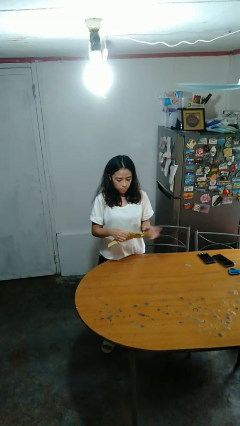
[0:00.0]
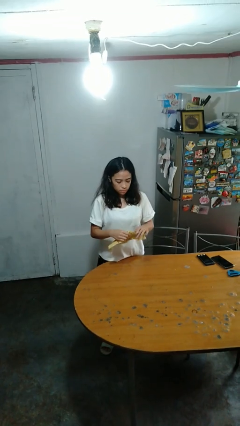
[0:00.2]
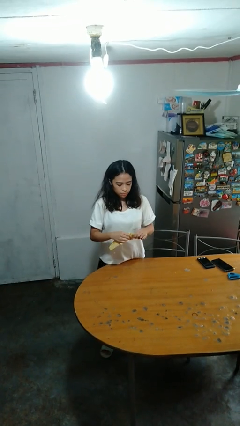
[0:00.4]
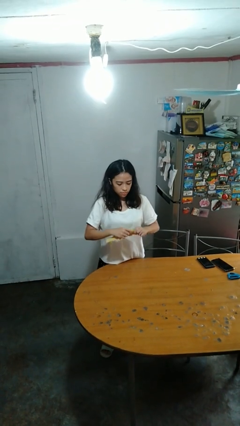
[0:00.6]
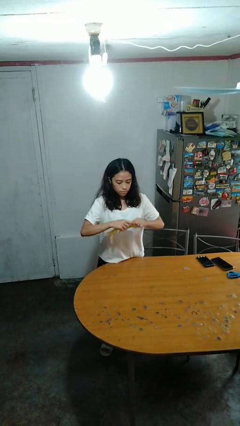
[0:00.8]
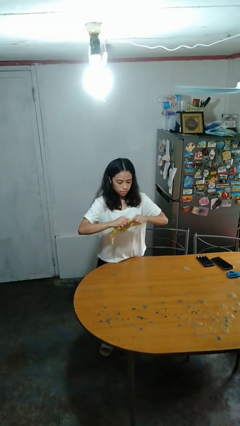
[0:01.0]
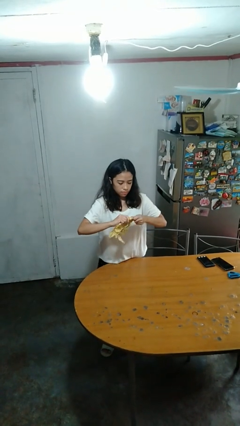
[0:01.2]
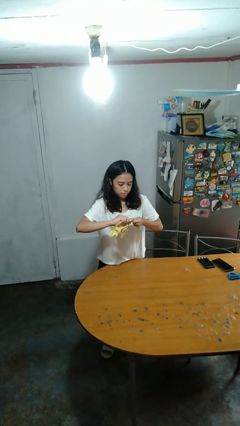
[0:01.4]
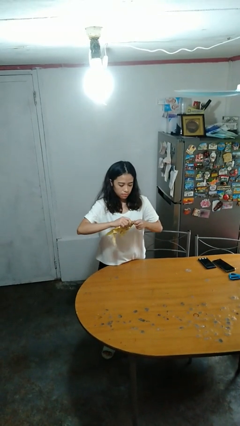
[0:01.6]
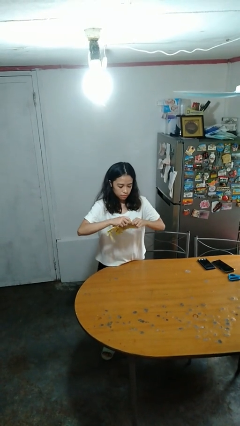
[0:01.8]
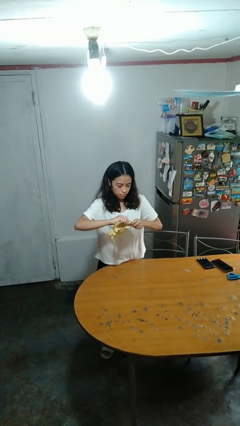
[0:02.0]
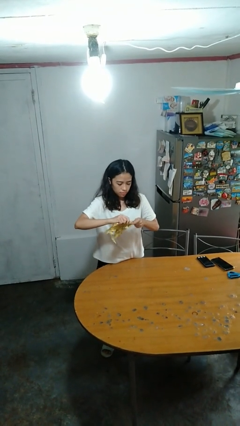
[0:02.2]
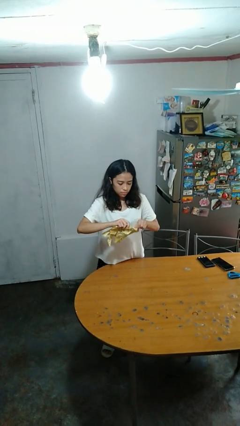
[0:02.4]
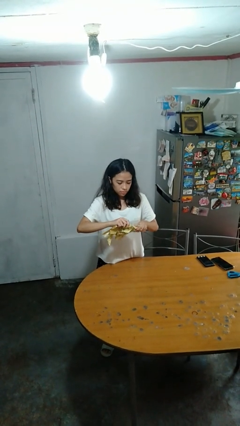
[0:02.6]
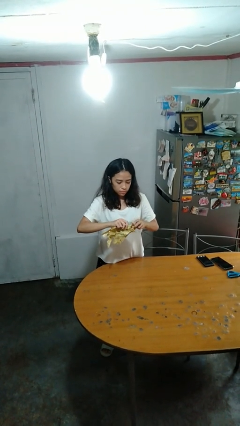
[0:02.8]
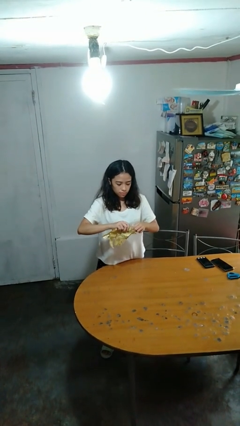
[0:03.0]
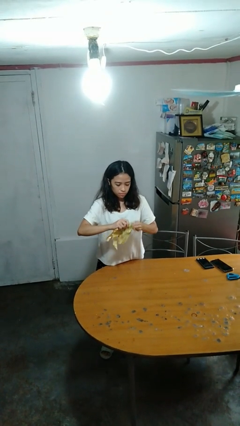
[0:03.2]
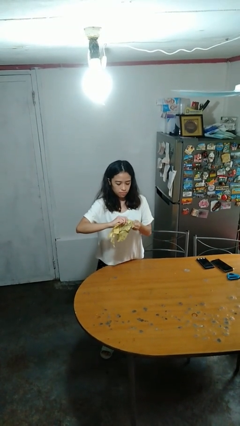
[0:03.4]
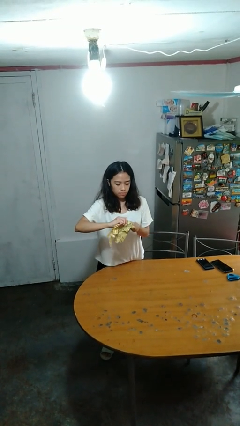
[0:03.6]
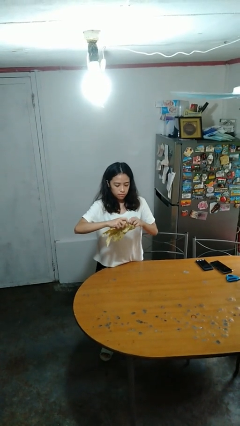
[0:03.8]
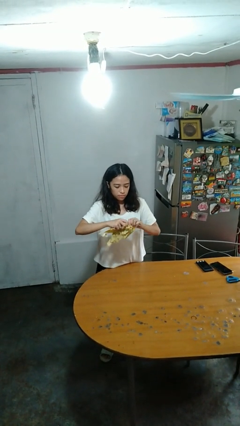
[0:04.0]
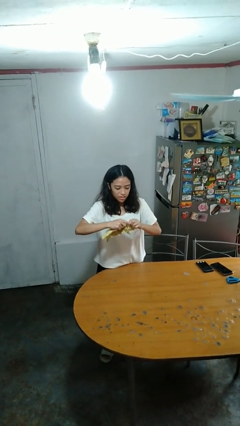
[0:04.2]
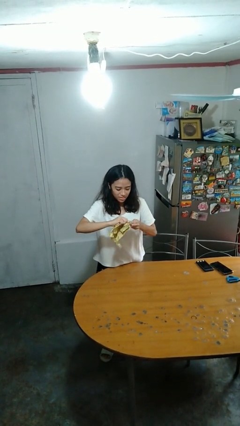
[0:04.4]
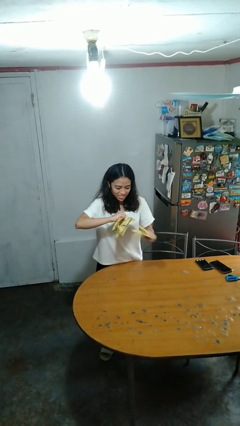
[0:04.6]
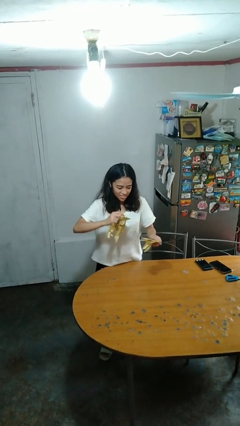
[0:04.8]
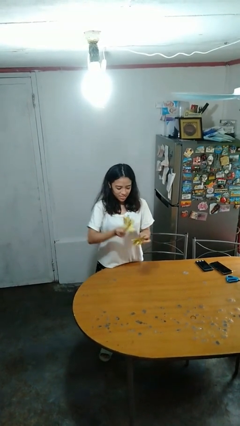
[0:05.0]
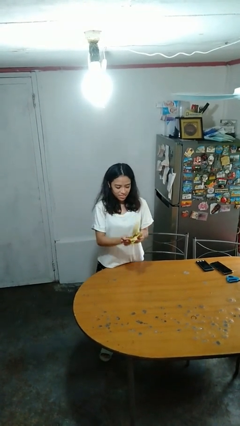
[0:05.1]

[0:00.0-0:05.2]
person tears paper

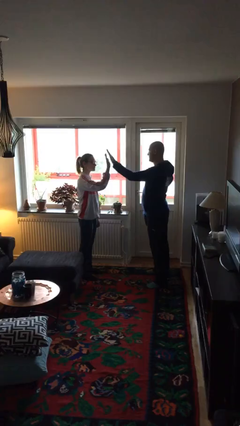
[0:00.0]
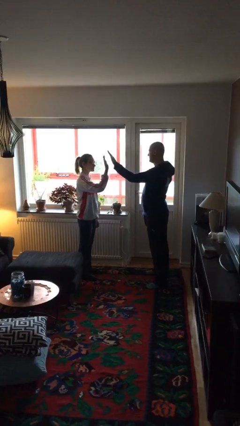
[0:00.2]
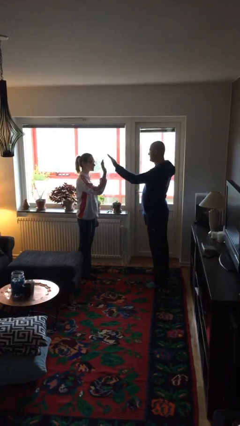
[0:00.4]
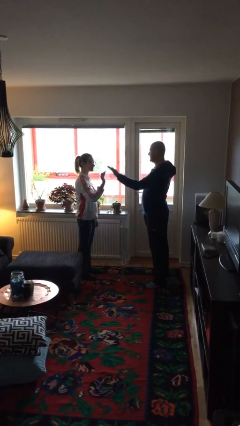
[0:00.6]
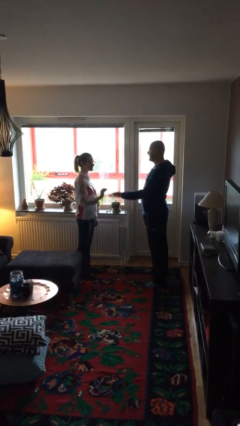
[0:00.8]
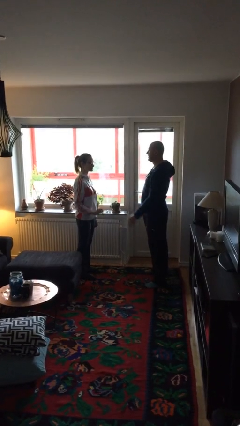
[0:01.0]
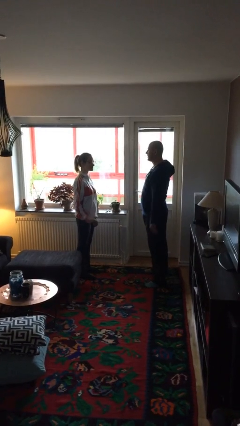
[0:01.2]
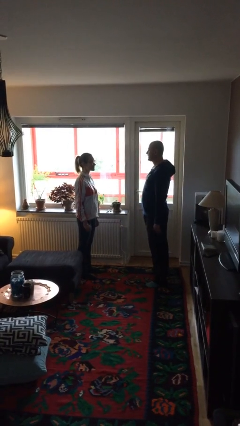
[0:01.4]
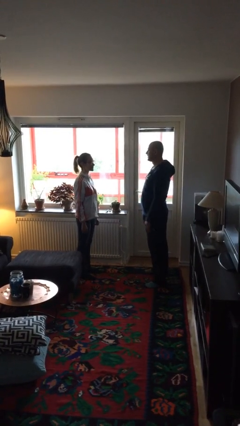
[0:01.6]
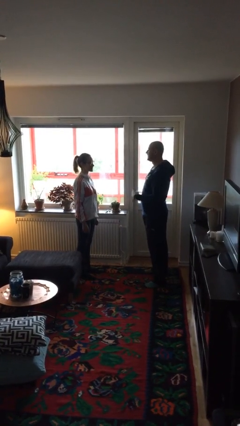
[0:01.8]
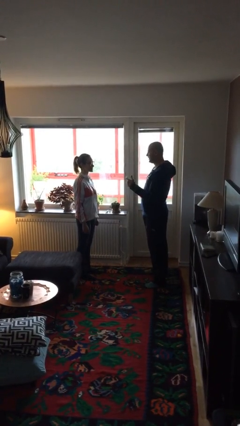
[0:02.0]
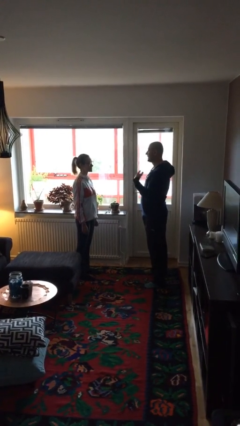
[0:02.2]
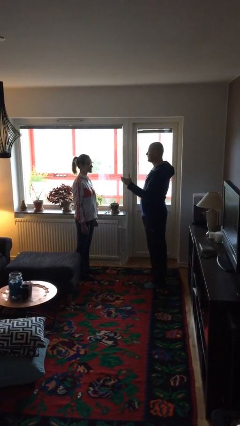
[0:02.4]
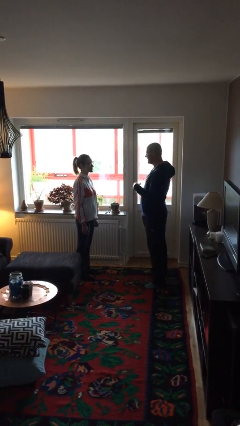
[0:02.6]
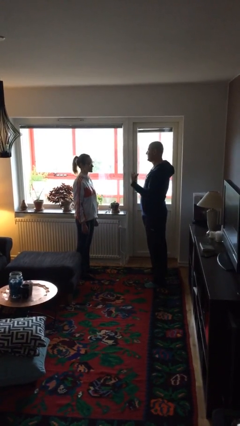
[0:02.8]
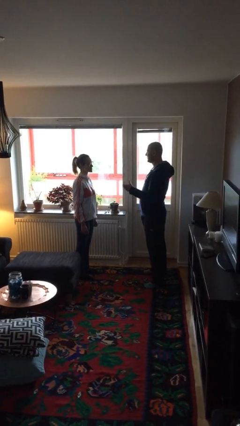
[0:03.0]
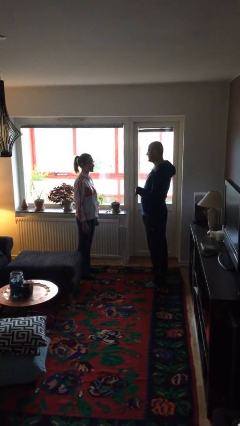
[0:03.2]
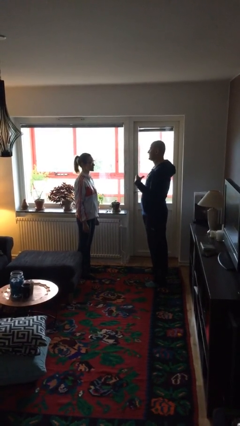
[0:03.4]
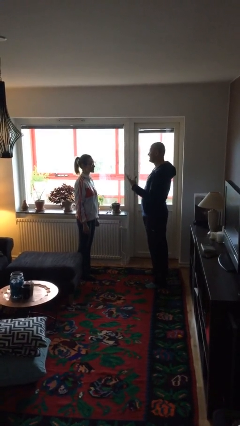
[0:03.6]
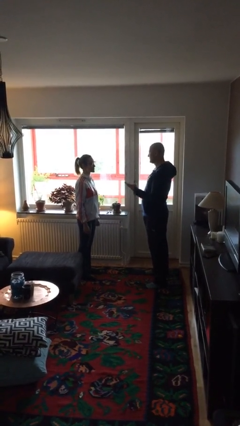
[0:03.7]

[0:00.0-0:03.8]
person highfives hand

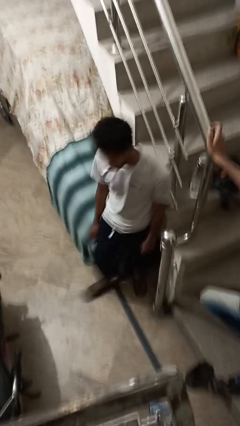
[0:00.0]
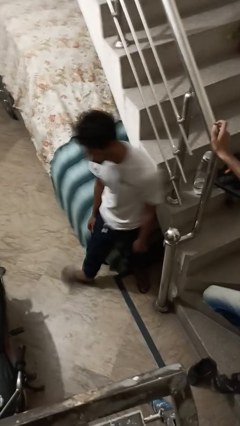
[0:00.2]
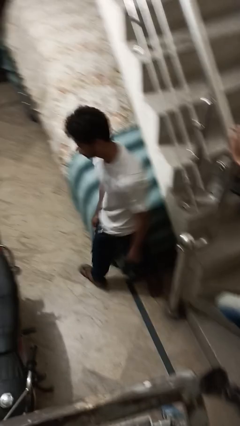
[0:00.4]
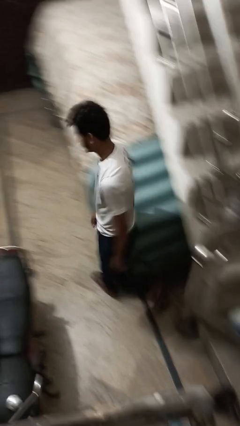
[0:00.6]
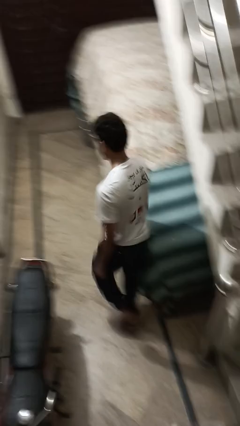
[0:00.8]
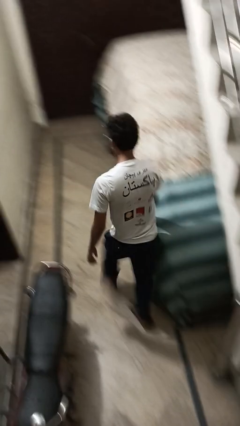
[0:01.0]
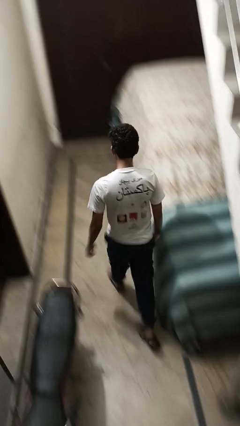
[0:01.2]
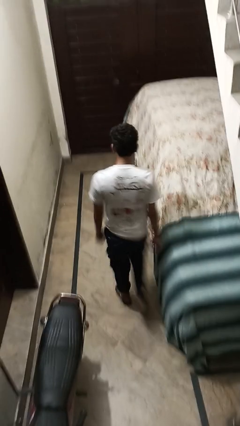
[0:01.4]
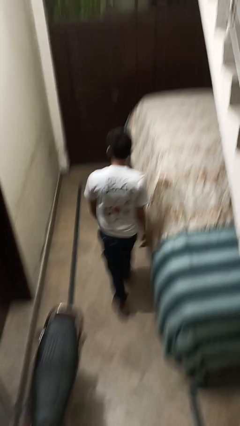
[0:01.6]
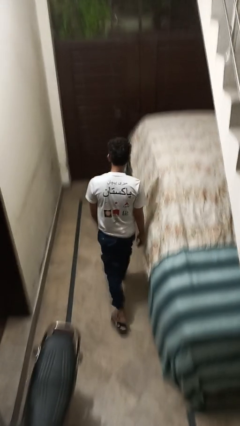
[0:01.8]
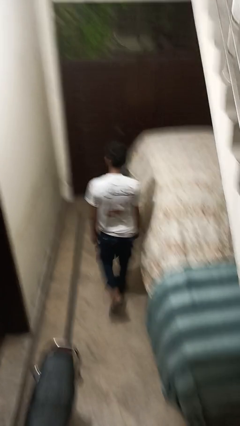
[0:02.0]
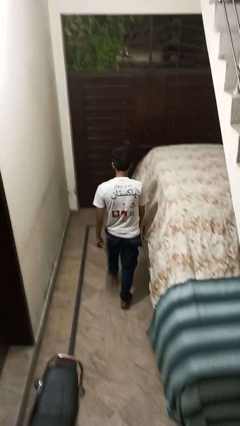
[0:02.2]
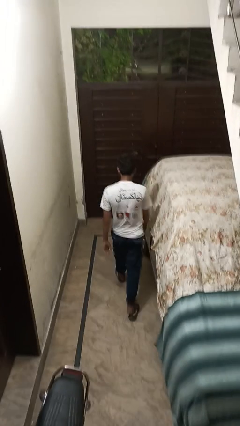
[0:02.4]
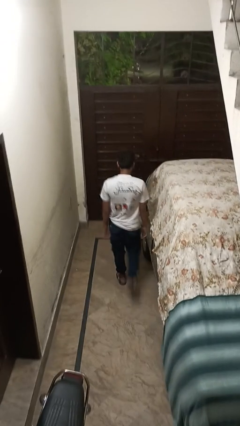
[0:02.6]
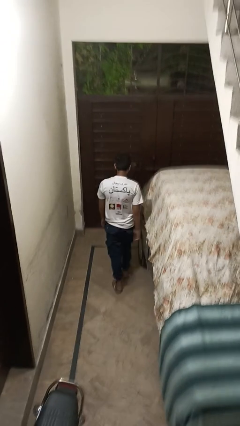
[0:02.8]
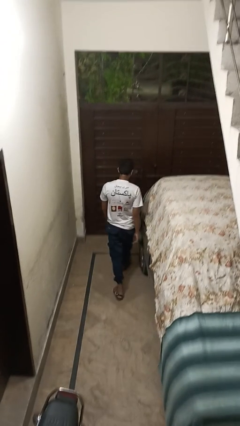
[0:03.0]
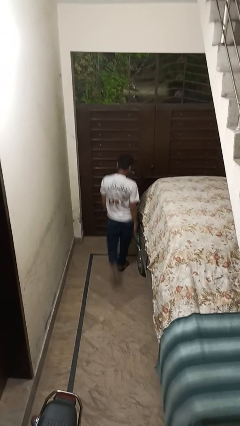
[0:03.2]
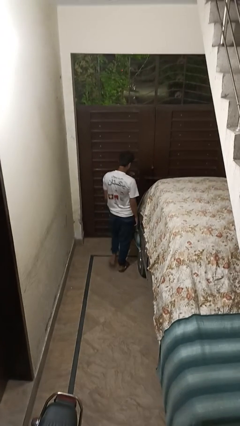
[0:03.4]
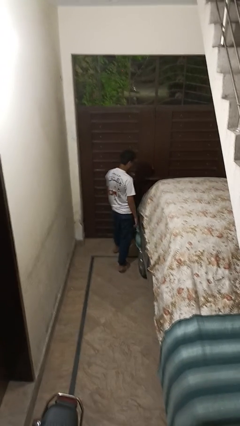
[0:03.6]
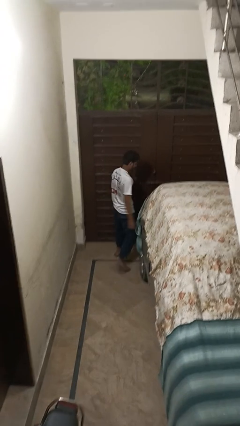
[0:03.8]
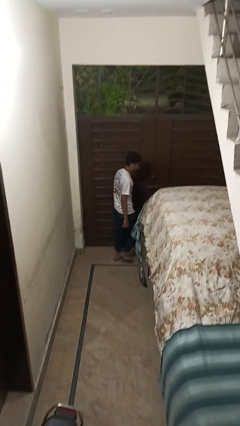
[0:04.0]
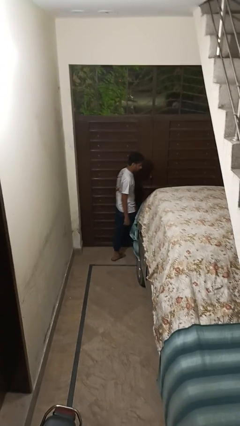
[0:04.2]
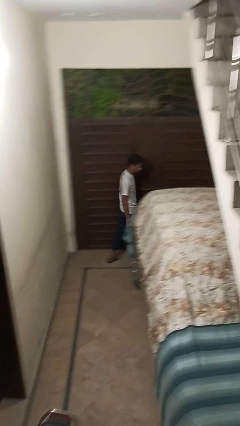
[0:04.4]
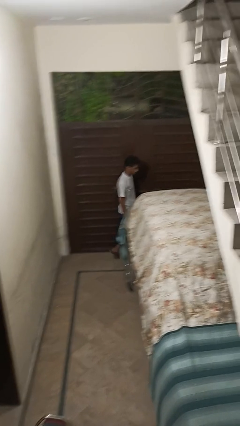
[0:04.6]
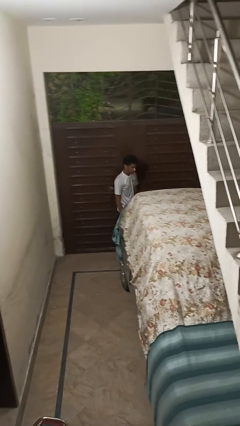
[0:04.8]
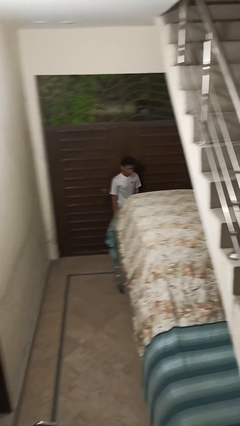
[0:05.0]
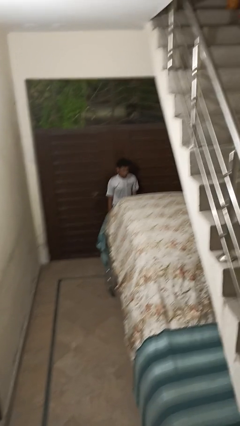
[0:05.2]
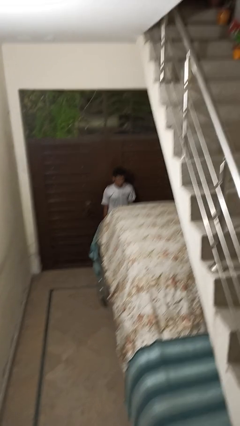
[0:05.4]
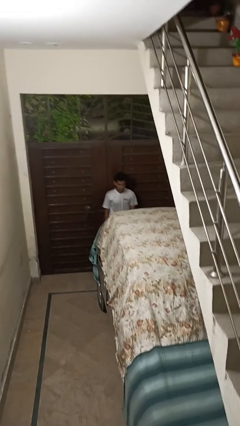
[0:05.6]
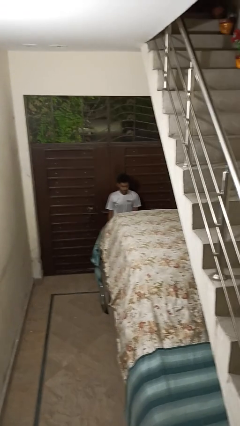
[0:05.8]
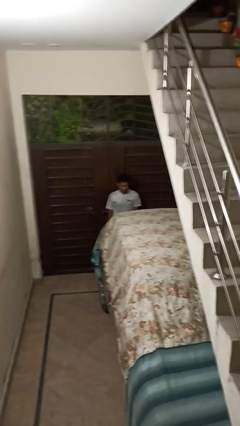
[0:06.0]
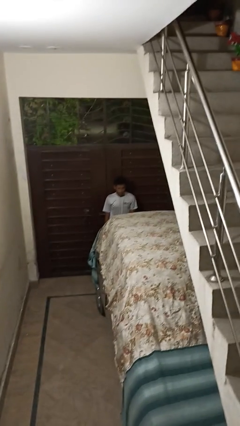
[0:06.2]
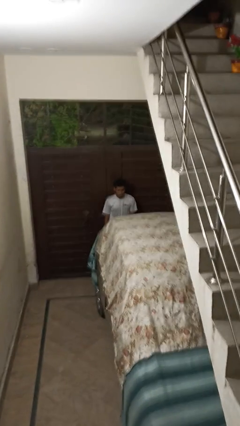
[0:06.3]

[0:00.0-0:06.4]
person walks around car

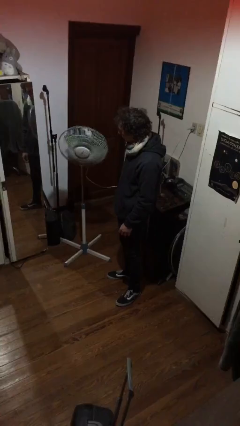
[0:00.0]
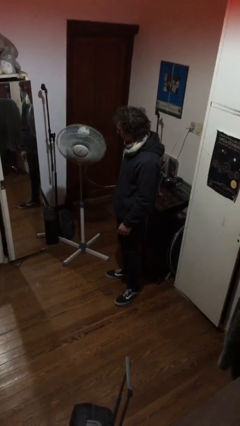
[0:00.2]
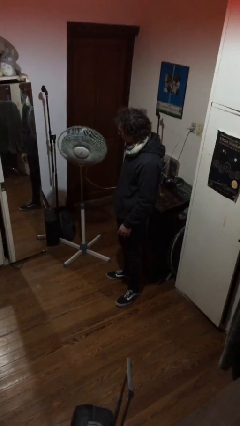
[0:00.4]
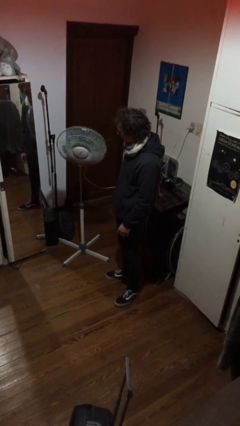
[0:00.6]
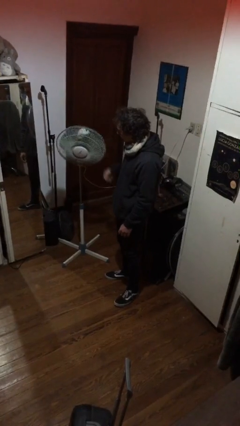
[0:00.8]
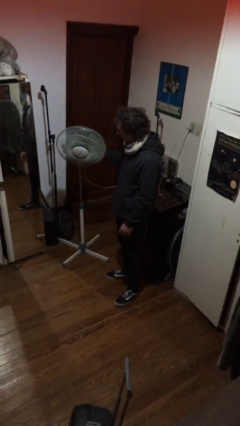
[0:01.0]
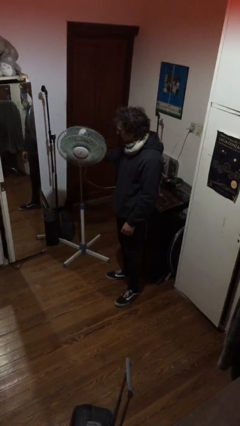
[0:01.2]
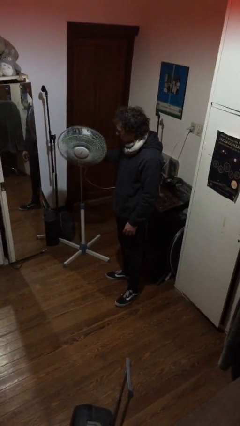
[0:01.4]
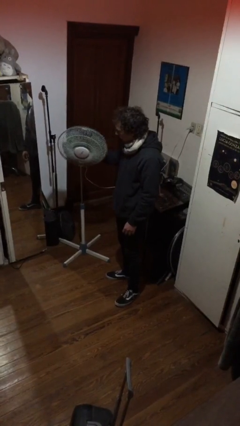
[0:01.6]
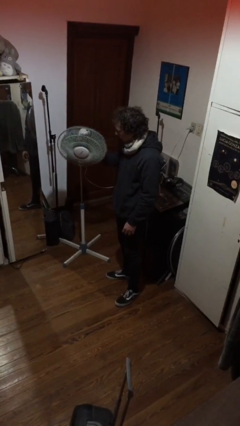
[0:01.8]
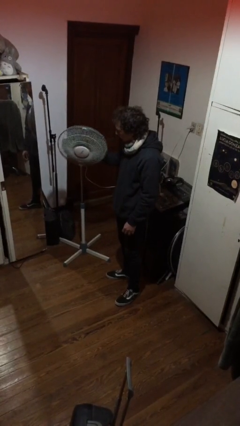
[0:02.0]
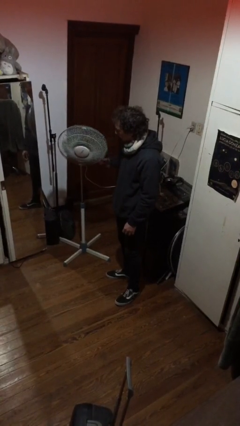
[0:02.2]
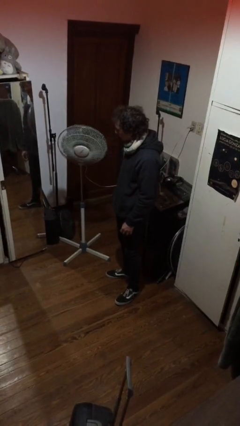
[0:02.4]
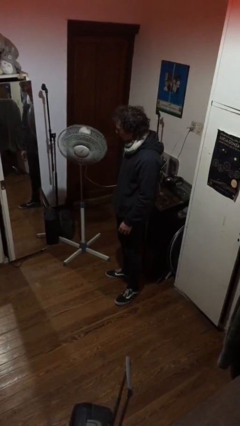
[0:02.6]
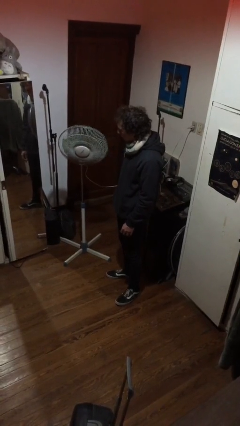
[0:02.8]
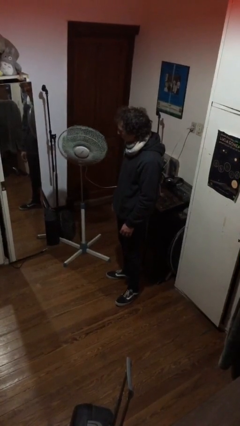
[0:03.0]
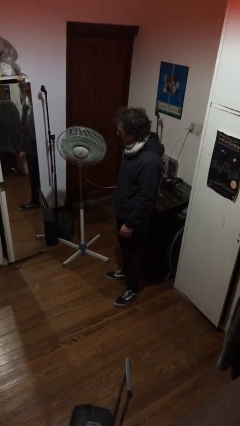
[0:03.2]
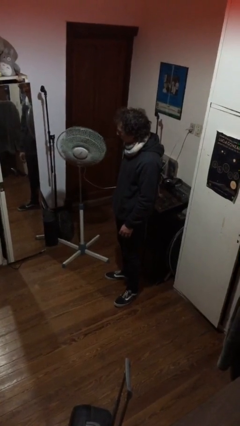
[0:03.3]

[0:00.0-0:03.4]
person turns on fan
